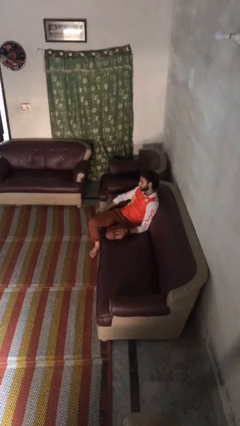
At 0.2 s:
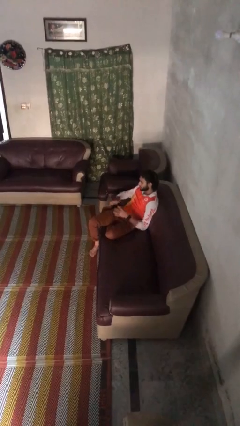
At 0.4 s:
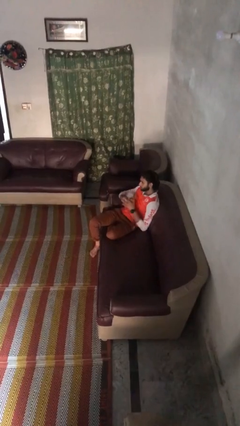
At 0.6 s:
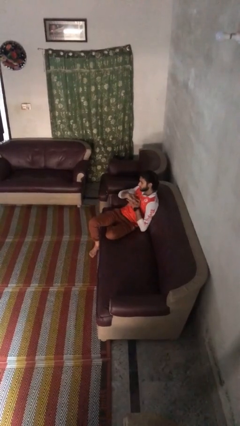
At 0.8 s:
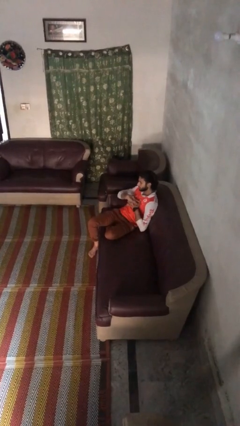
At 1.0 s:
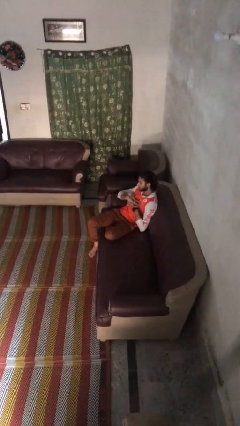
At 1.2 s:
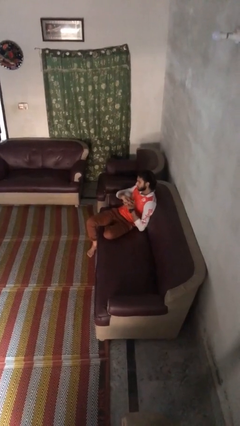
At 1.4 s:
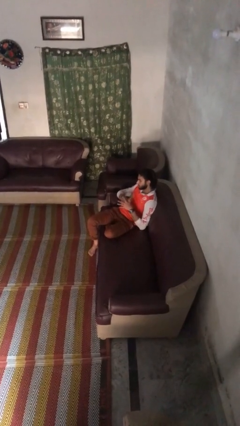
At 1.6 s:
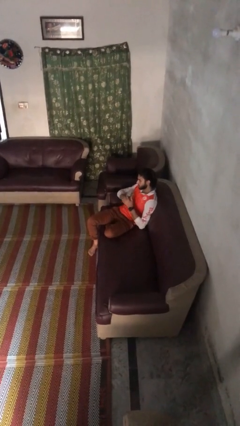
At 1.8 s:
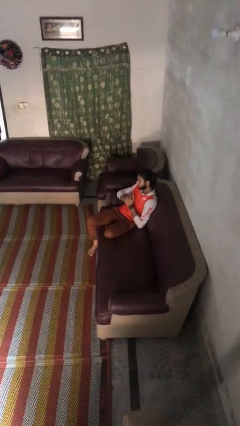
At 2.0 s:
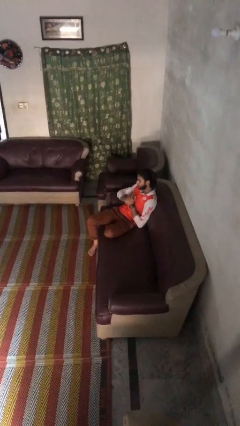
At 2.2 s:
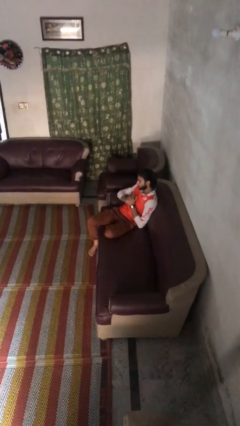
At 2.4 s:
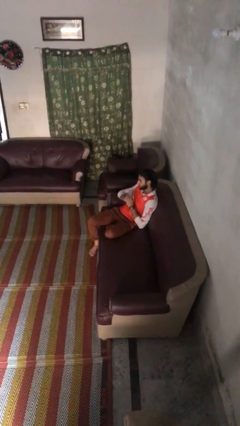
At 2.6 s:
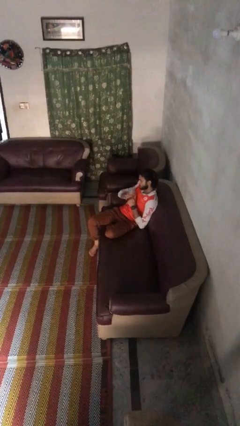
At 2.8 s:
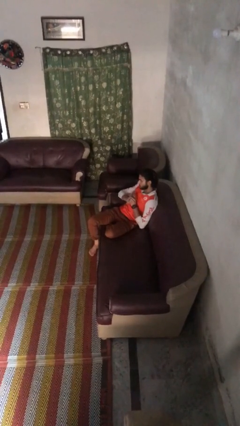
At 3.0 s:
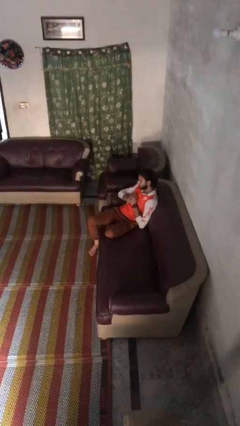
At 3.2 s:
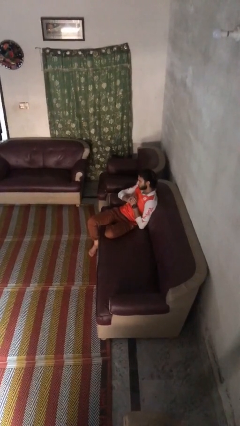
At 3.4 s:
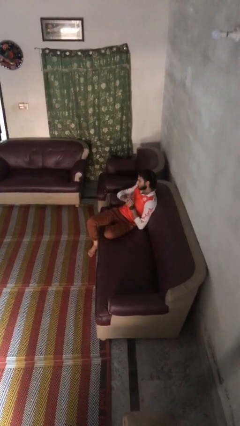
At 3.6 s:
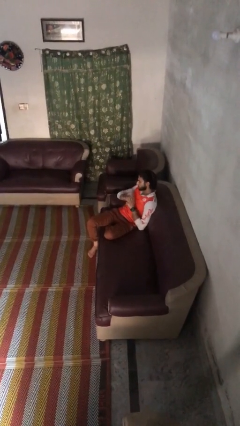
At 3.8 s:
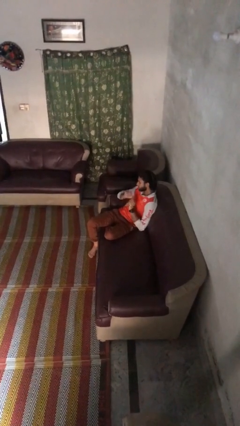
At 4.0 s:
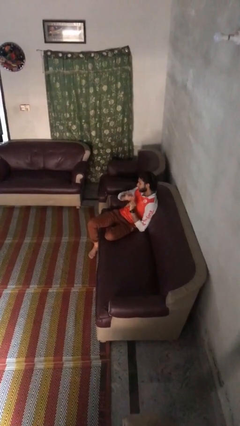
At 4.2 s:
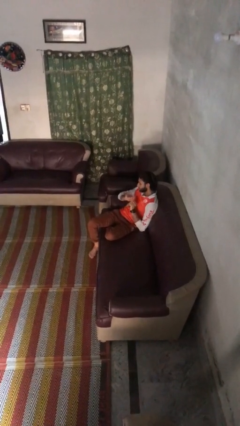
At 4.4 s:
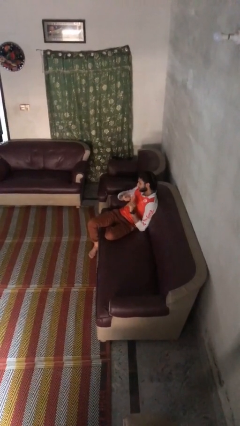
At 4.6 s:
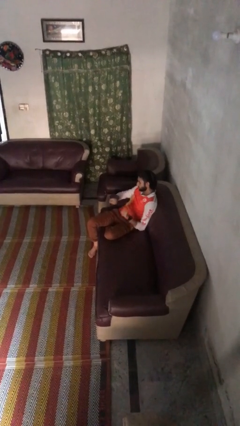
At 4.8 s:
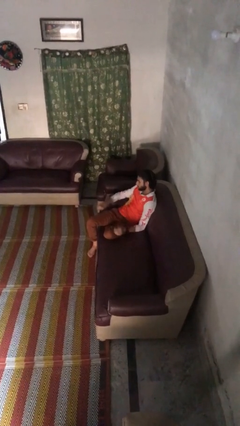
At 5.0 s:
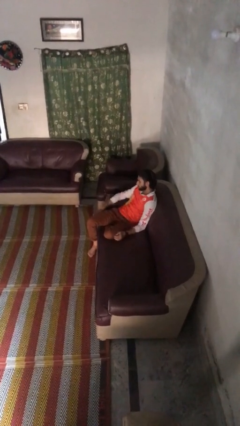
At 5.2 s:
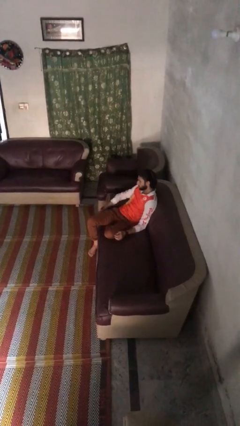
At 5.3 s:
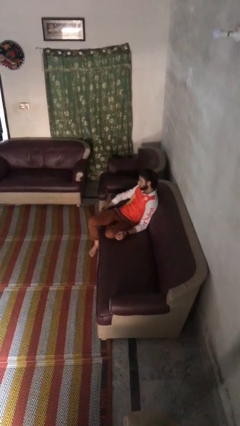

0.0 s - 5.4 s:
person cracks knuckles

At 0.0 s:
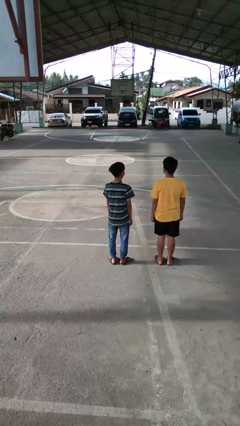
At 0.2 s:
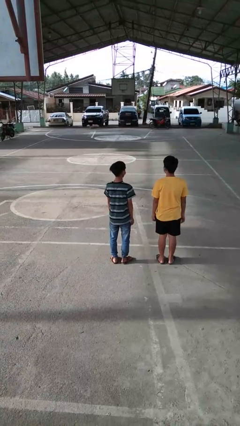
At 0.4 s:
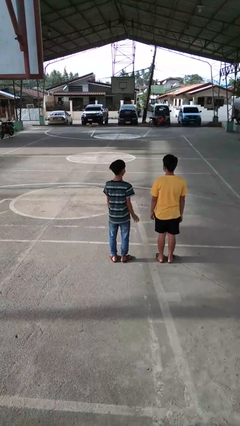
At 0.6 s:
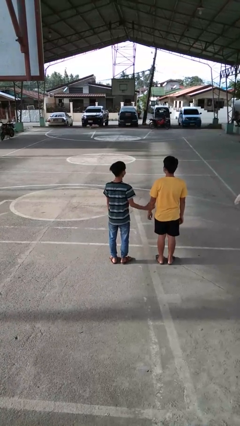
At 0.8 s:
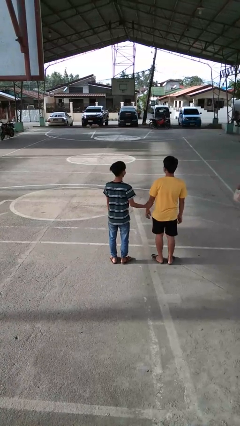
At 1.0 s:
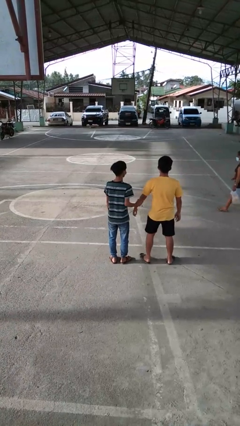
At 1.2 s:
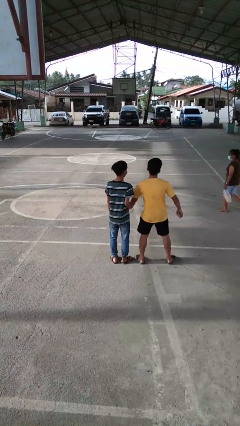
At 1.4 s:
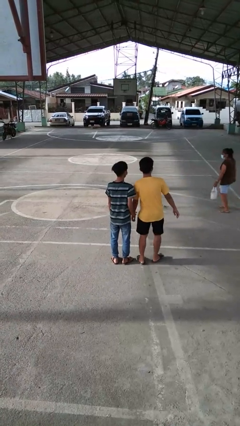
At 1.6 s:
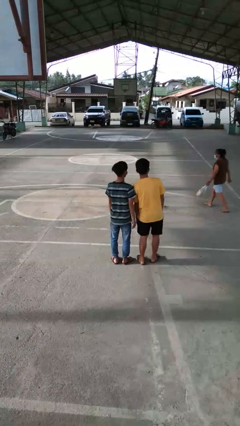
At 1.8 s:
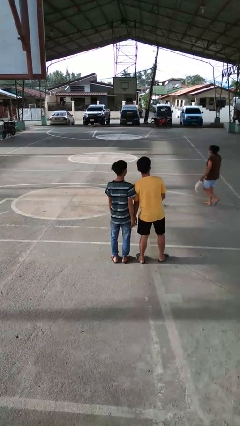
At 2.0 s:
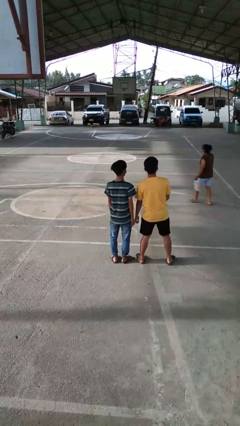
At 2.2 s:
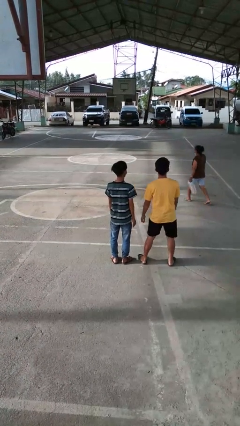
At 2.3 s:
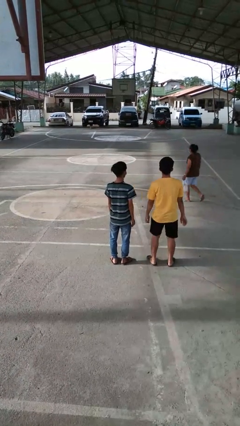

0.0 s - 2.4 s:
person grabs person by forearm

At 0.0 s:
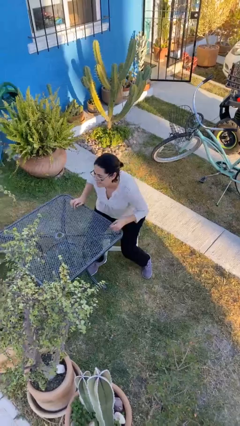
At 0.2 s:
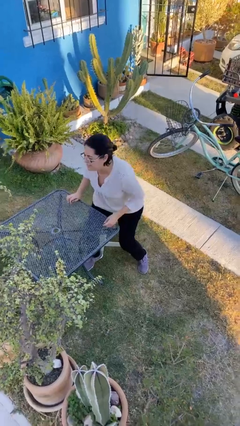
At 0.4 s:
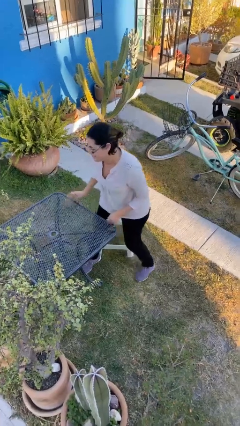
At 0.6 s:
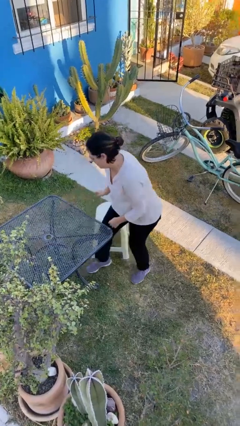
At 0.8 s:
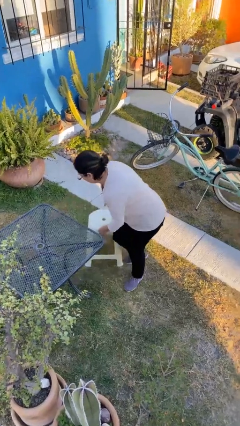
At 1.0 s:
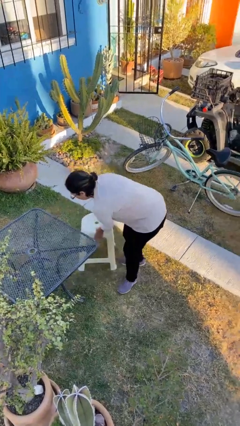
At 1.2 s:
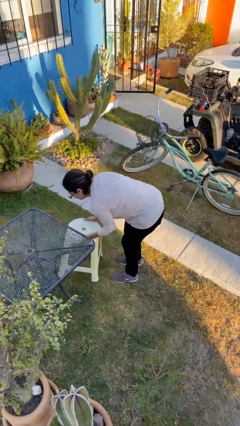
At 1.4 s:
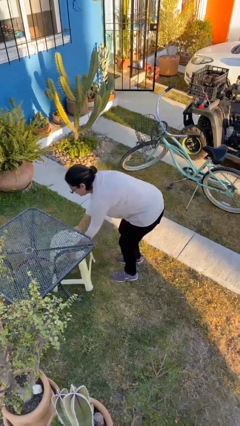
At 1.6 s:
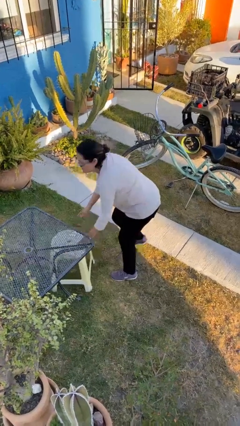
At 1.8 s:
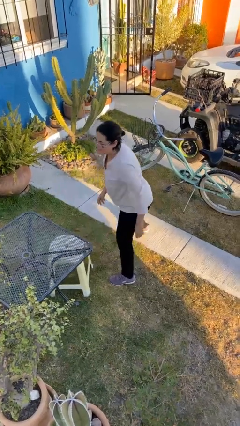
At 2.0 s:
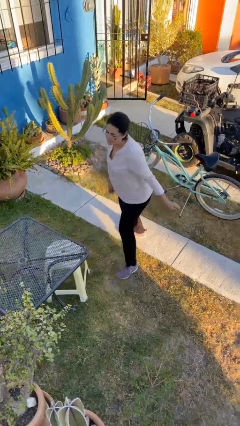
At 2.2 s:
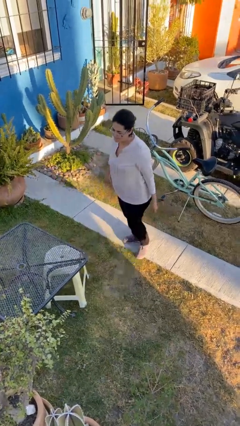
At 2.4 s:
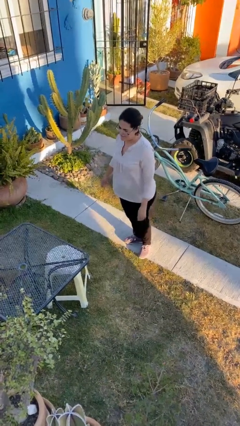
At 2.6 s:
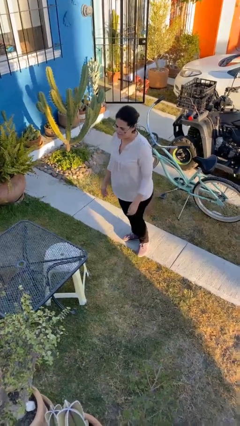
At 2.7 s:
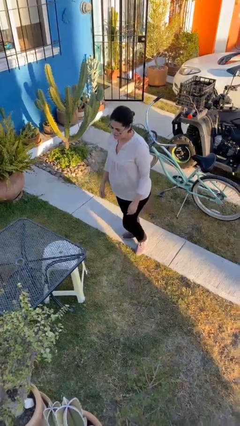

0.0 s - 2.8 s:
person stands up

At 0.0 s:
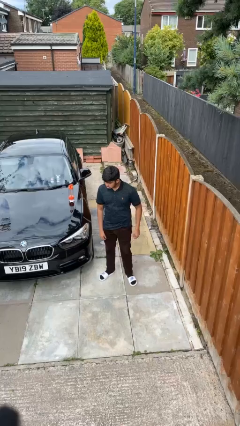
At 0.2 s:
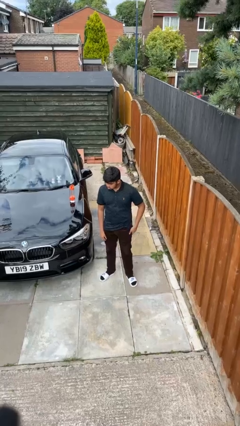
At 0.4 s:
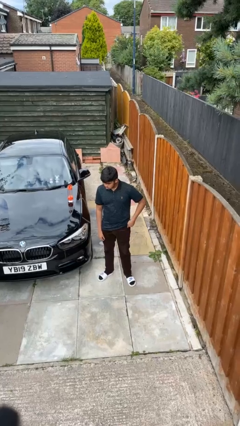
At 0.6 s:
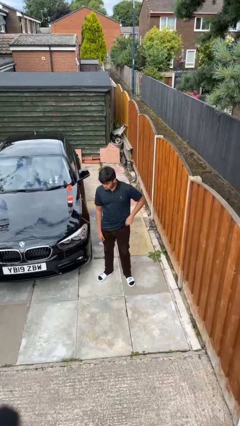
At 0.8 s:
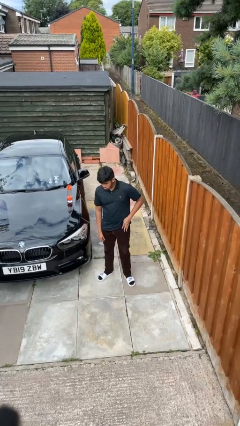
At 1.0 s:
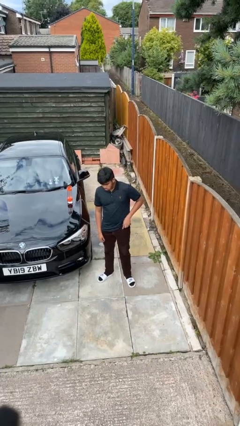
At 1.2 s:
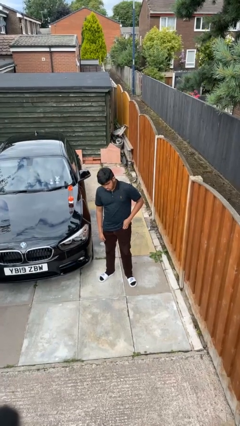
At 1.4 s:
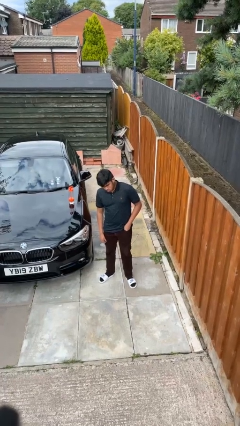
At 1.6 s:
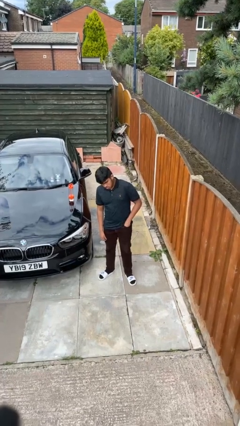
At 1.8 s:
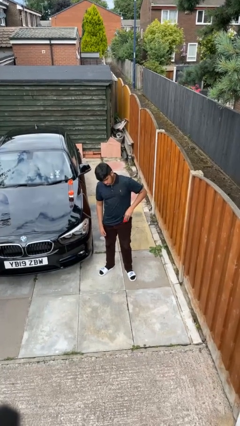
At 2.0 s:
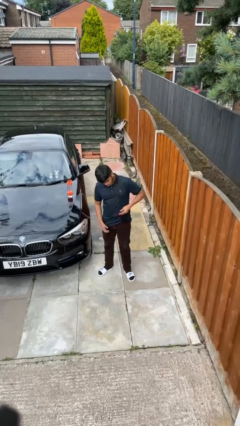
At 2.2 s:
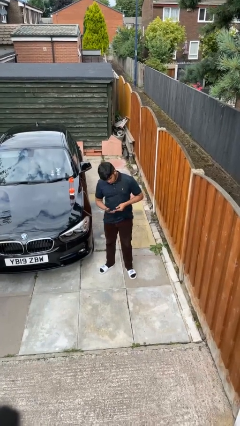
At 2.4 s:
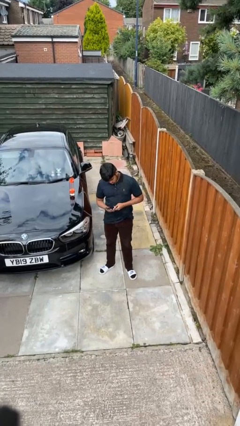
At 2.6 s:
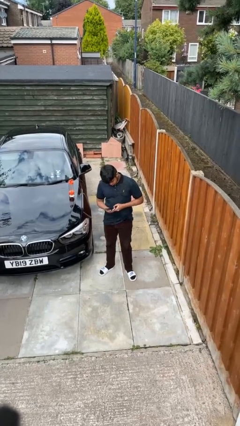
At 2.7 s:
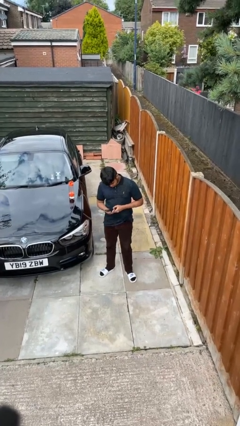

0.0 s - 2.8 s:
person takes phone from pocket

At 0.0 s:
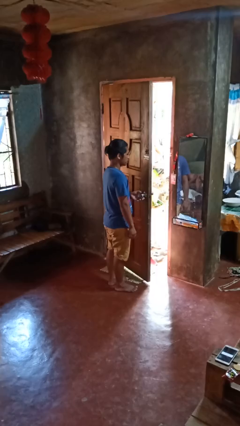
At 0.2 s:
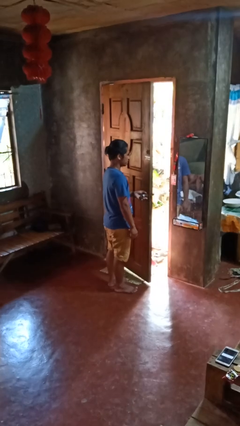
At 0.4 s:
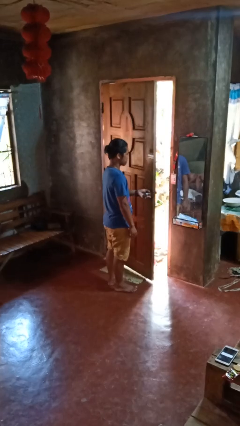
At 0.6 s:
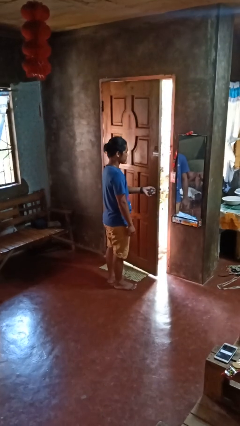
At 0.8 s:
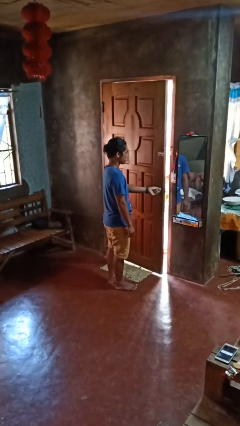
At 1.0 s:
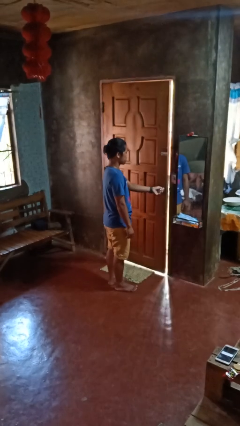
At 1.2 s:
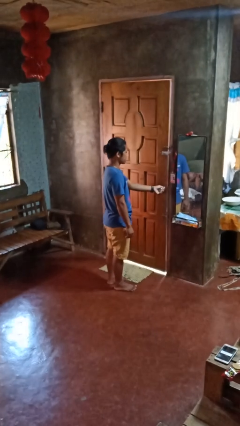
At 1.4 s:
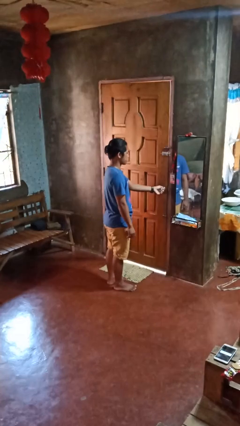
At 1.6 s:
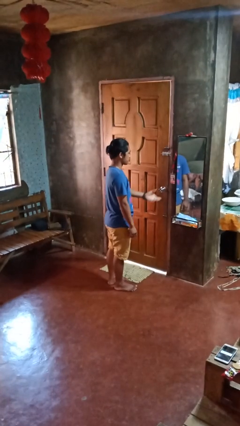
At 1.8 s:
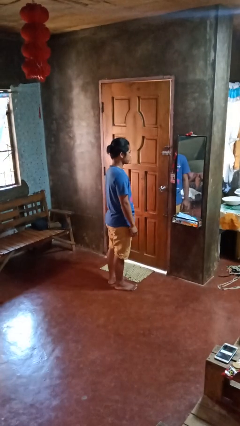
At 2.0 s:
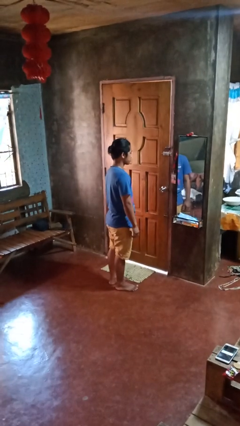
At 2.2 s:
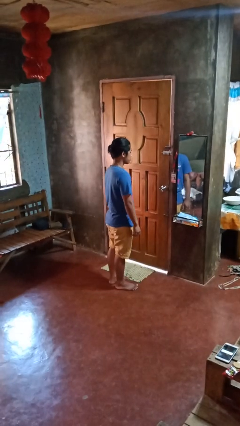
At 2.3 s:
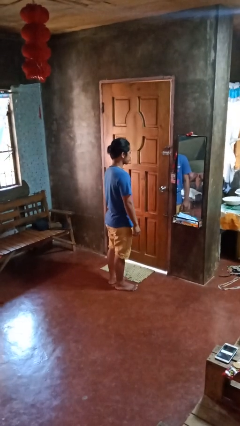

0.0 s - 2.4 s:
person closes facility door

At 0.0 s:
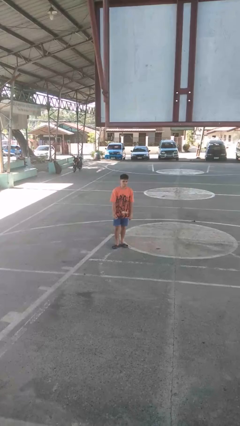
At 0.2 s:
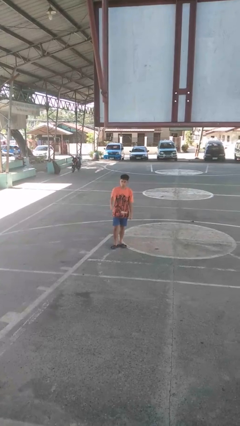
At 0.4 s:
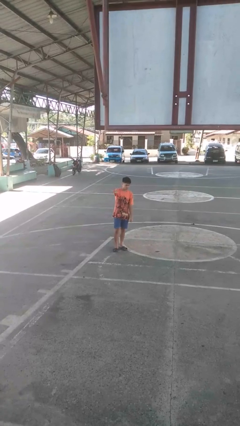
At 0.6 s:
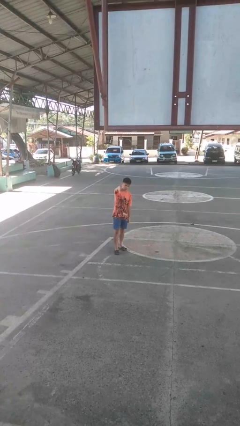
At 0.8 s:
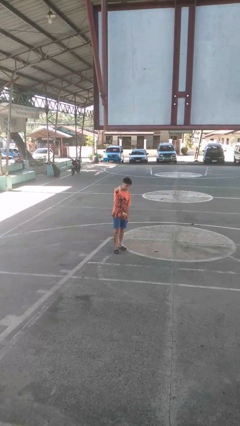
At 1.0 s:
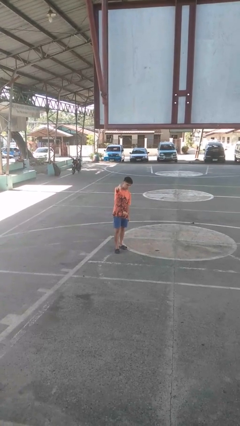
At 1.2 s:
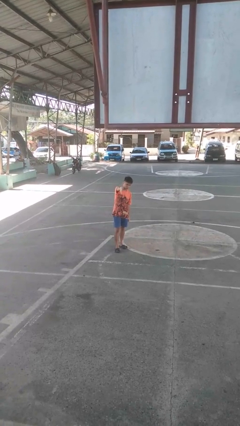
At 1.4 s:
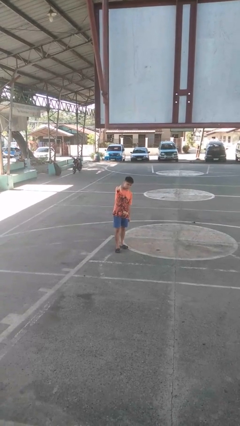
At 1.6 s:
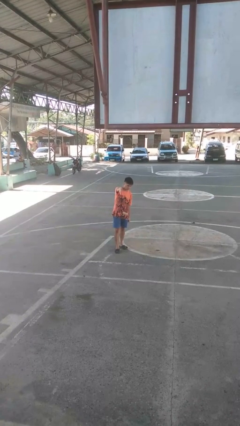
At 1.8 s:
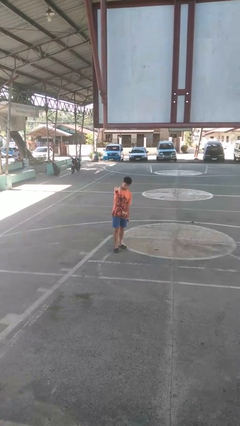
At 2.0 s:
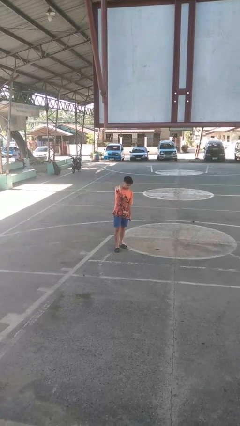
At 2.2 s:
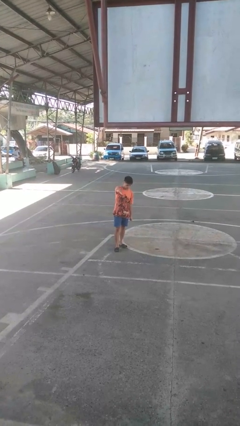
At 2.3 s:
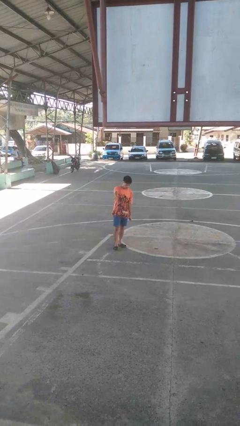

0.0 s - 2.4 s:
person gestures thumbs down
